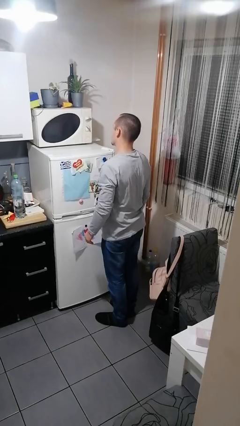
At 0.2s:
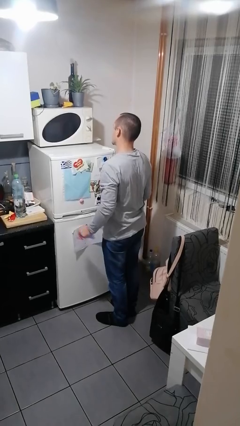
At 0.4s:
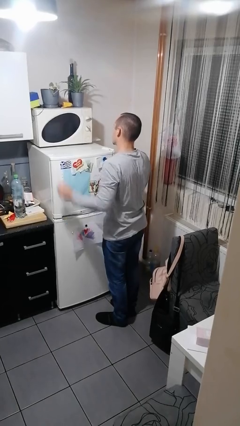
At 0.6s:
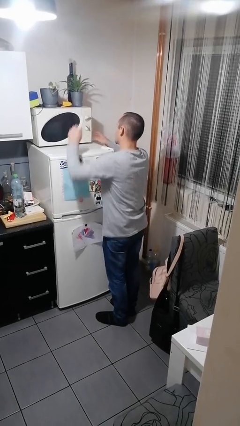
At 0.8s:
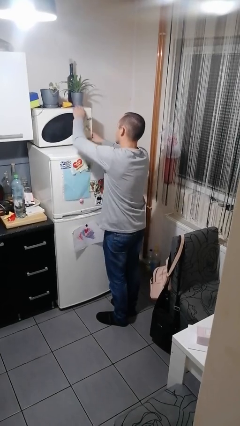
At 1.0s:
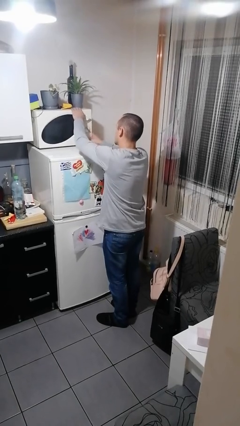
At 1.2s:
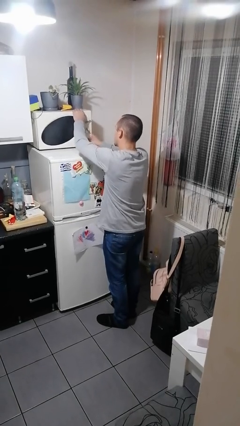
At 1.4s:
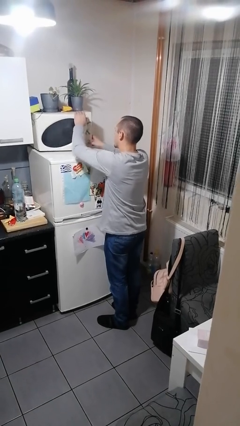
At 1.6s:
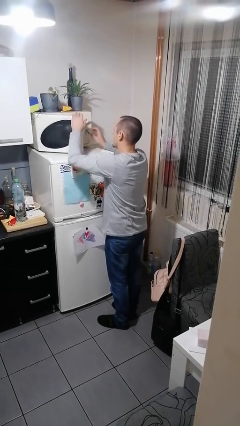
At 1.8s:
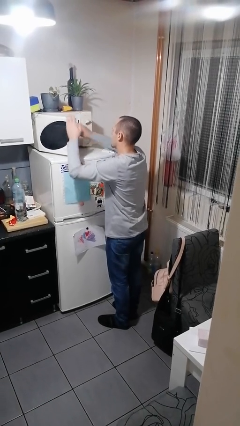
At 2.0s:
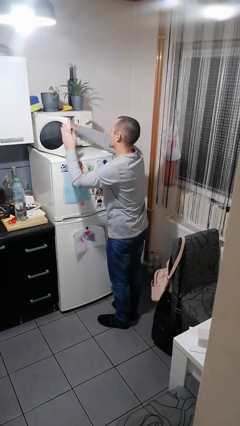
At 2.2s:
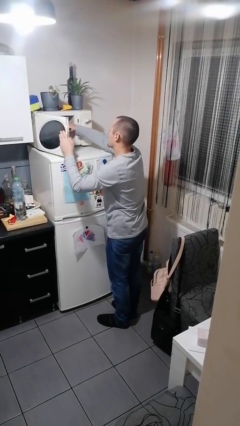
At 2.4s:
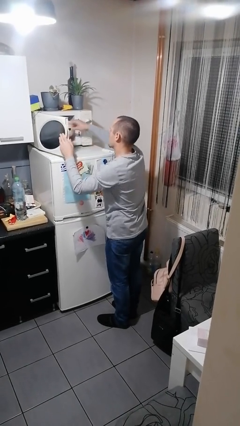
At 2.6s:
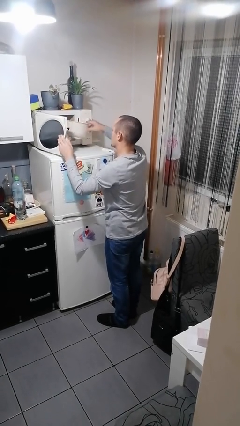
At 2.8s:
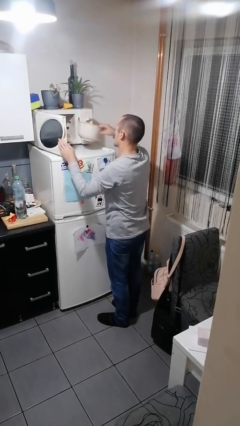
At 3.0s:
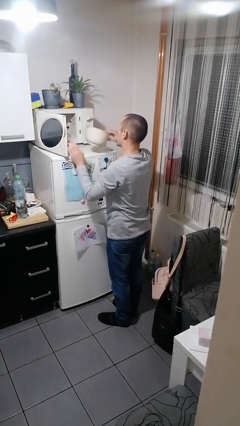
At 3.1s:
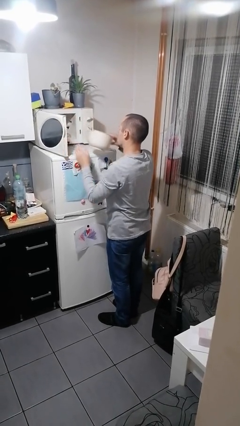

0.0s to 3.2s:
person takes object from microwave

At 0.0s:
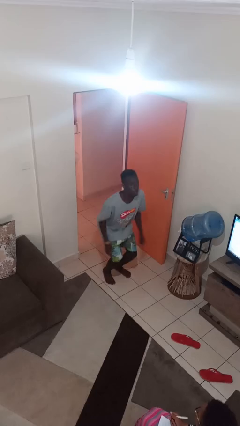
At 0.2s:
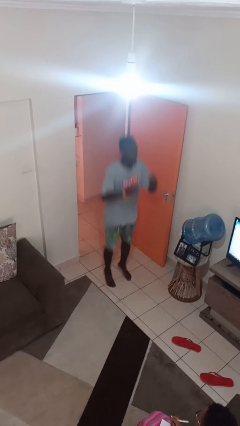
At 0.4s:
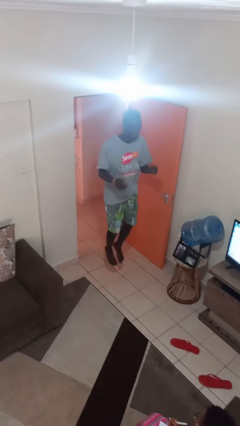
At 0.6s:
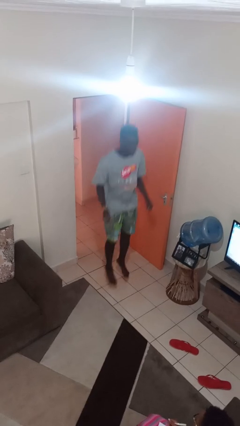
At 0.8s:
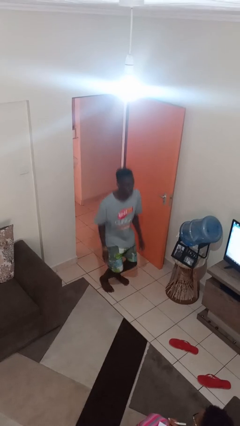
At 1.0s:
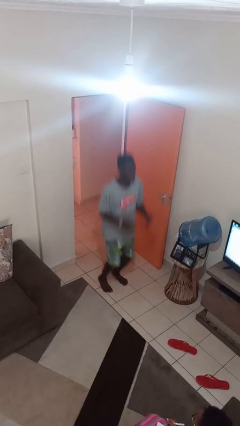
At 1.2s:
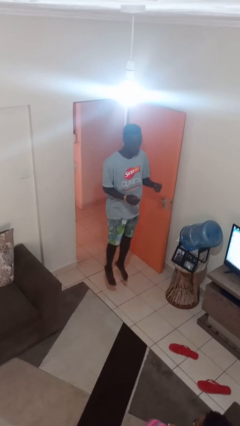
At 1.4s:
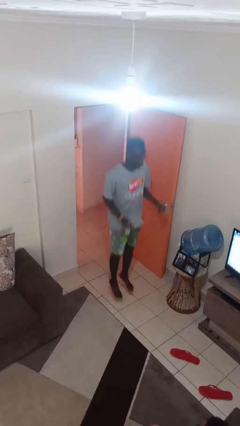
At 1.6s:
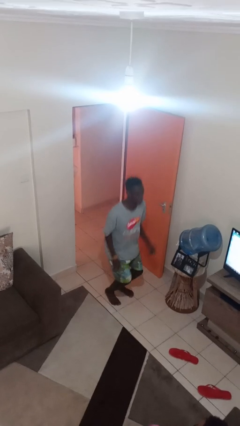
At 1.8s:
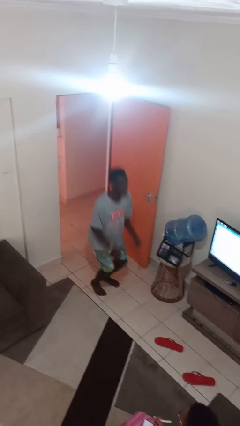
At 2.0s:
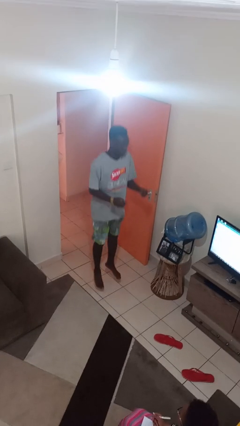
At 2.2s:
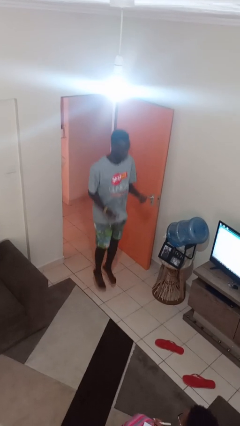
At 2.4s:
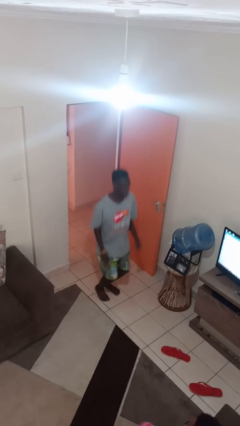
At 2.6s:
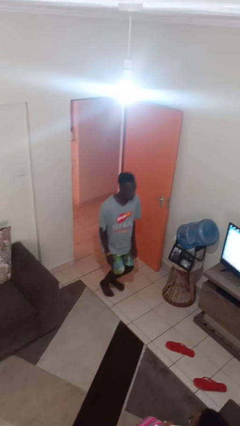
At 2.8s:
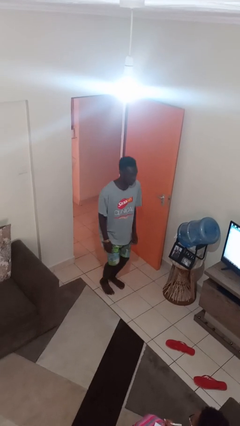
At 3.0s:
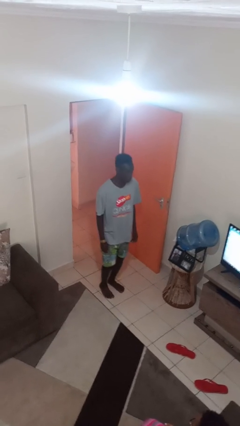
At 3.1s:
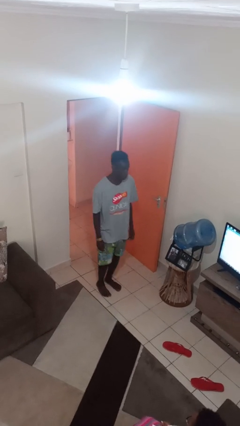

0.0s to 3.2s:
person jumps

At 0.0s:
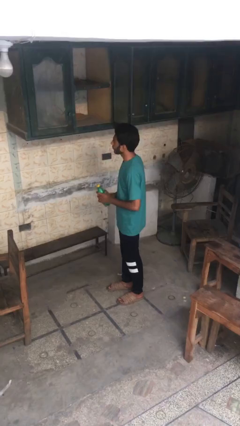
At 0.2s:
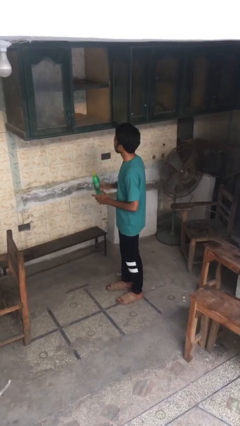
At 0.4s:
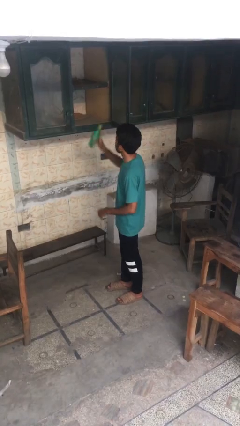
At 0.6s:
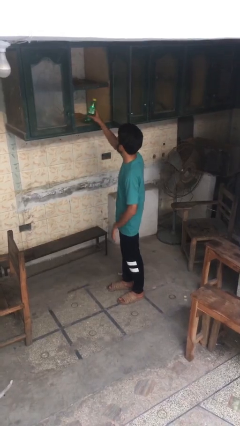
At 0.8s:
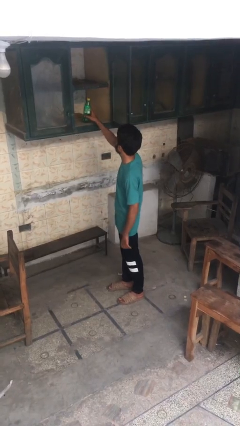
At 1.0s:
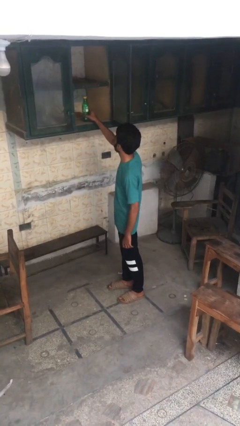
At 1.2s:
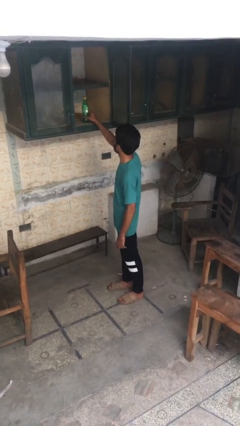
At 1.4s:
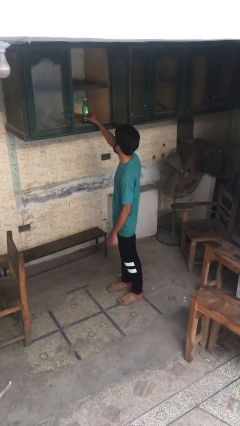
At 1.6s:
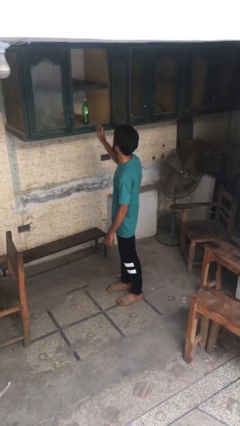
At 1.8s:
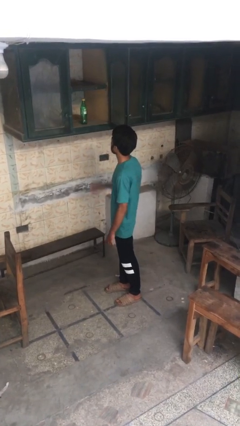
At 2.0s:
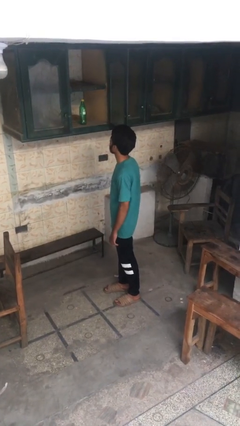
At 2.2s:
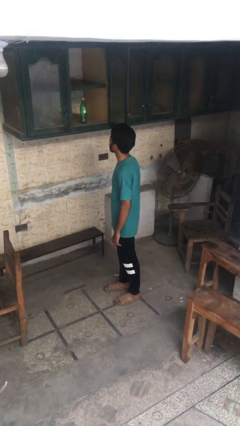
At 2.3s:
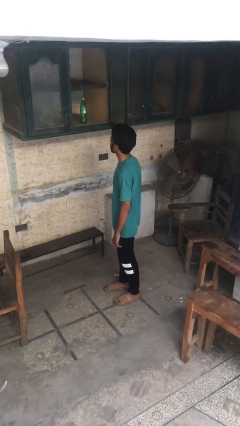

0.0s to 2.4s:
person puts object in cabinet

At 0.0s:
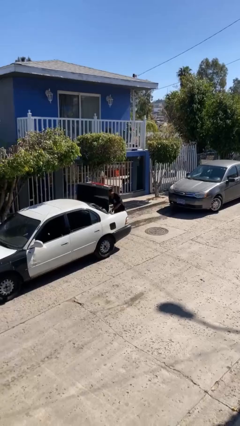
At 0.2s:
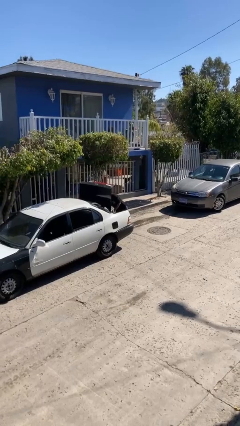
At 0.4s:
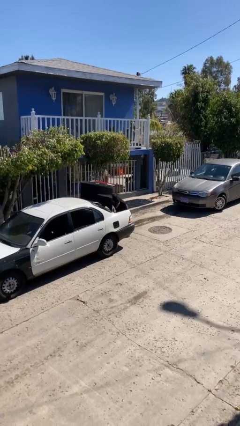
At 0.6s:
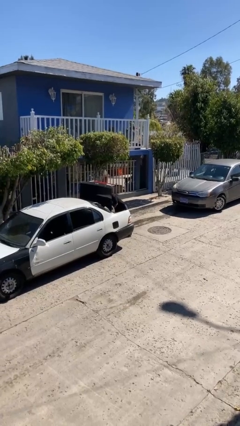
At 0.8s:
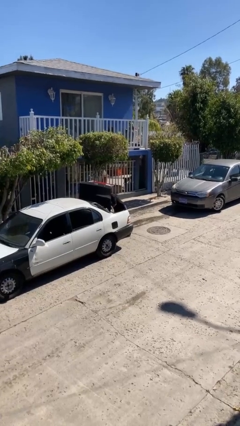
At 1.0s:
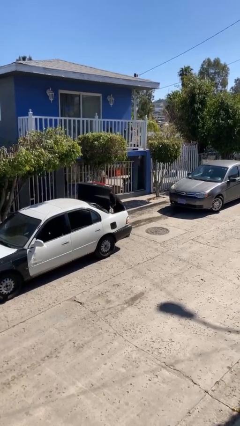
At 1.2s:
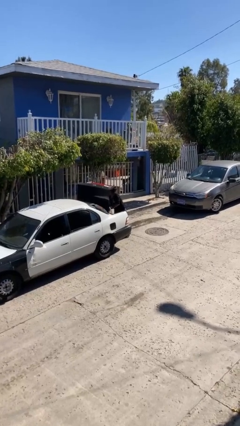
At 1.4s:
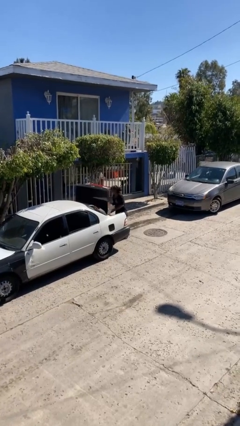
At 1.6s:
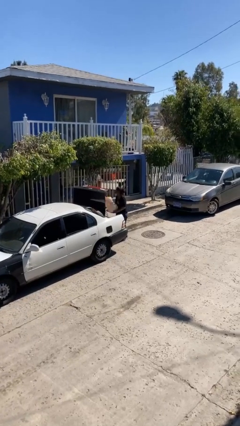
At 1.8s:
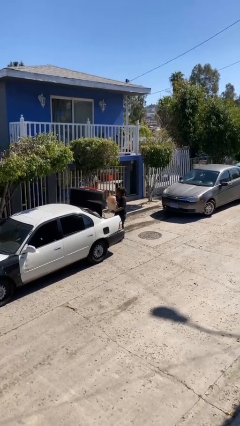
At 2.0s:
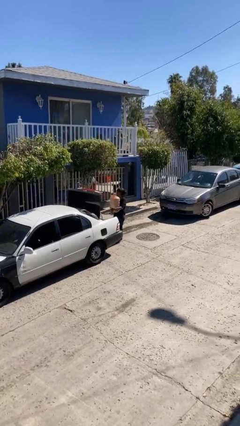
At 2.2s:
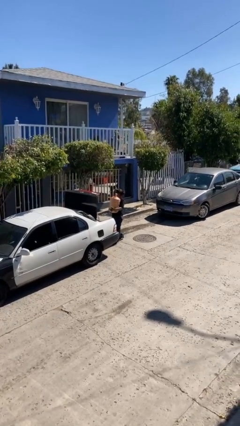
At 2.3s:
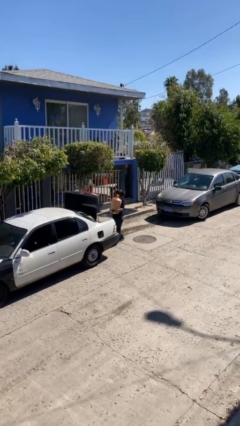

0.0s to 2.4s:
person unloads car

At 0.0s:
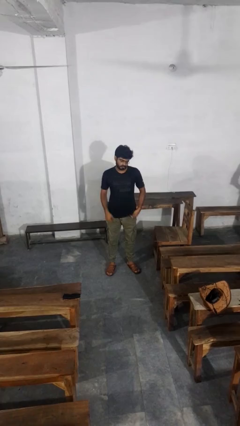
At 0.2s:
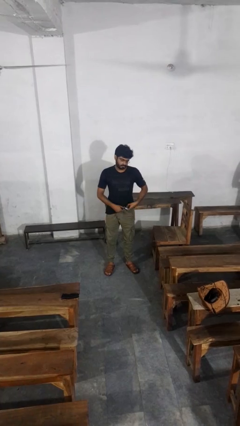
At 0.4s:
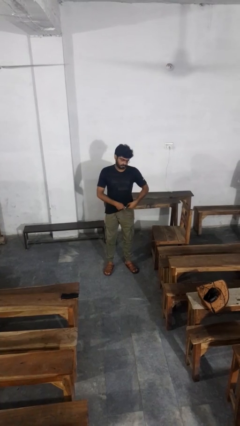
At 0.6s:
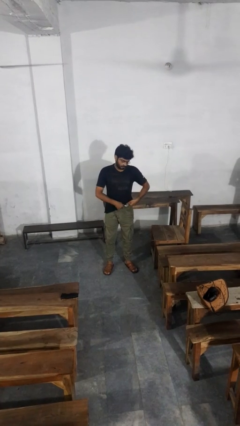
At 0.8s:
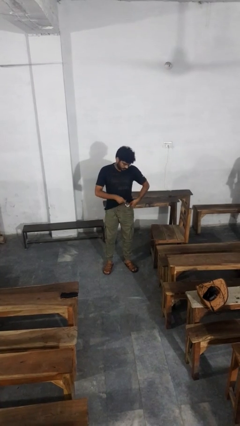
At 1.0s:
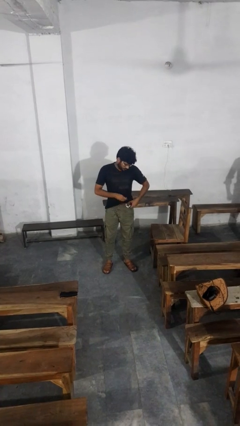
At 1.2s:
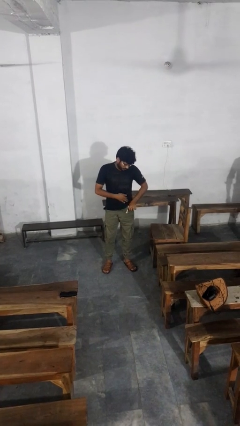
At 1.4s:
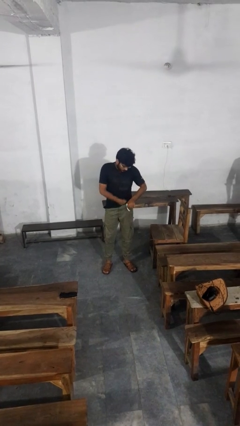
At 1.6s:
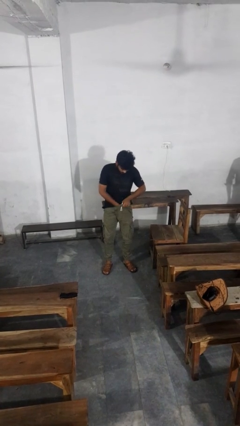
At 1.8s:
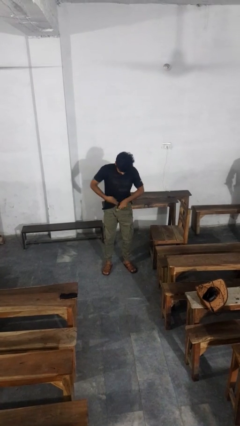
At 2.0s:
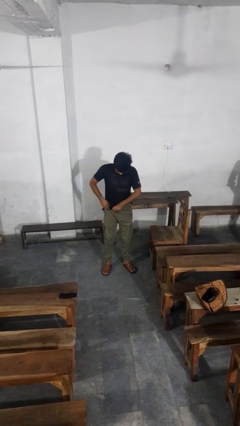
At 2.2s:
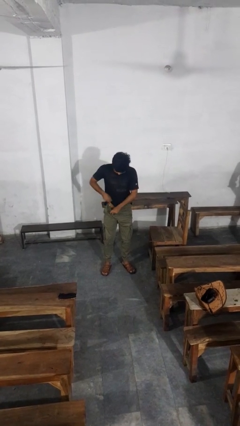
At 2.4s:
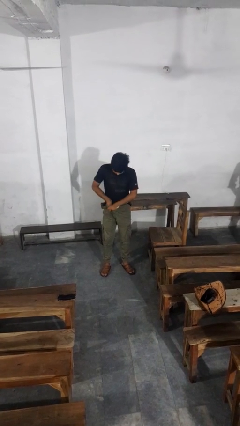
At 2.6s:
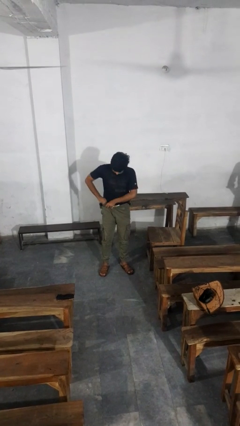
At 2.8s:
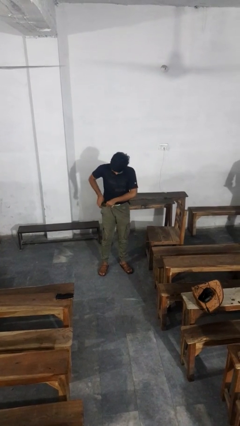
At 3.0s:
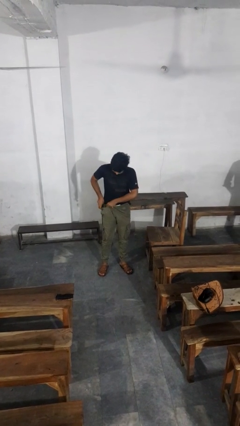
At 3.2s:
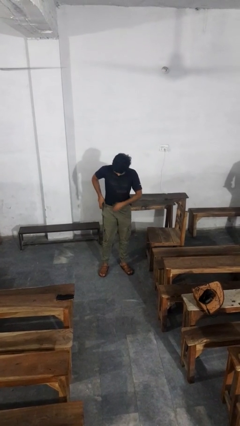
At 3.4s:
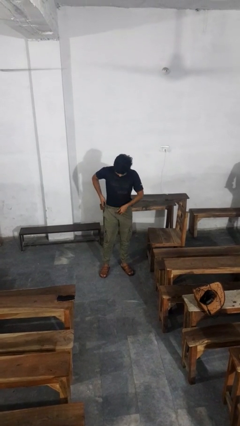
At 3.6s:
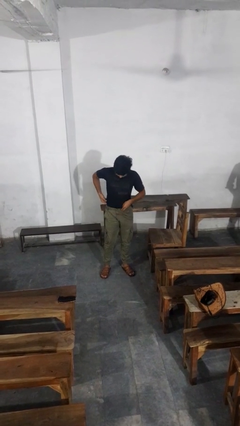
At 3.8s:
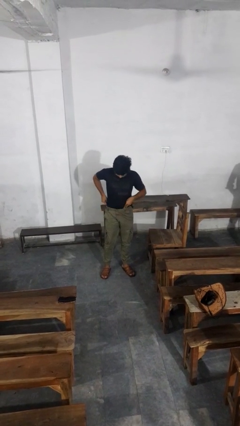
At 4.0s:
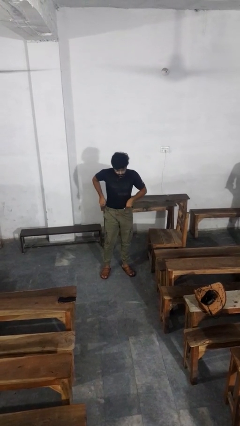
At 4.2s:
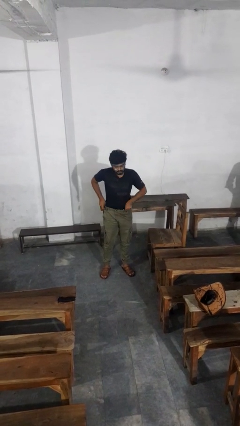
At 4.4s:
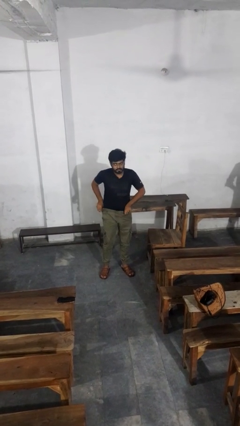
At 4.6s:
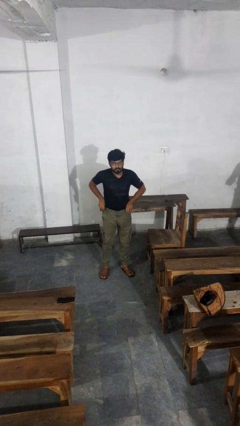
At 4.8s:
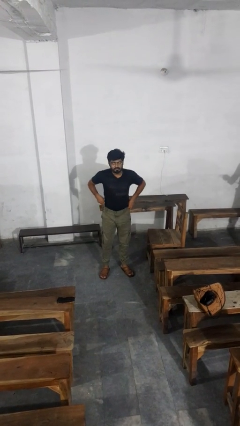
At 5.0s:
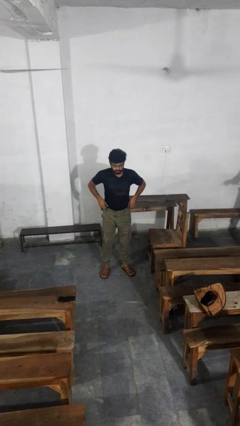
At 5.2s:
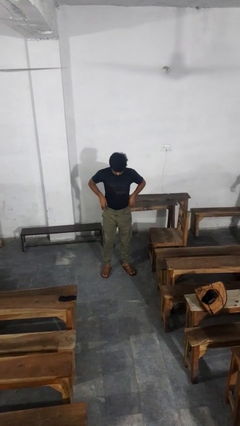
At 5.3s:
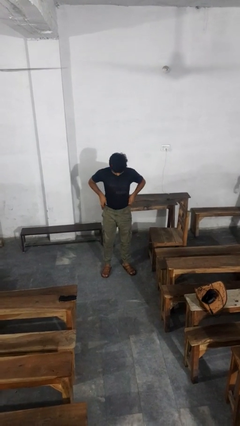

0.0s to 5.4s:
person tucks in shirt

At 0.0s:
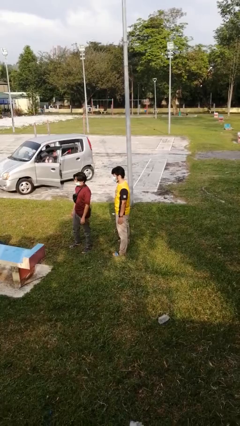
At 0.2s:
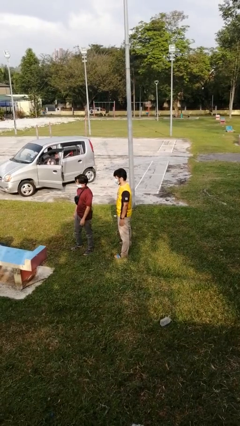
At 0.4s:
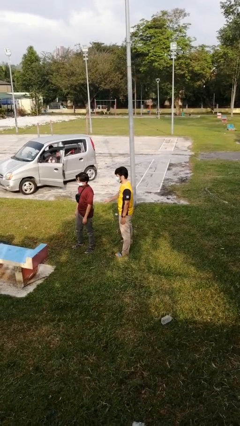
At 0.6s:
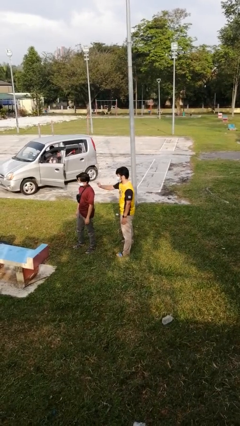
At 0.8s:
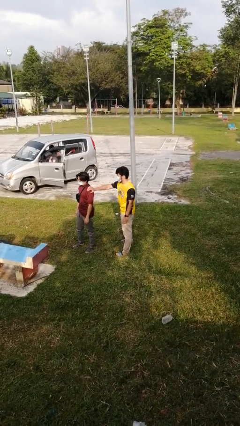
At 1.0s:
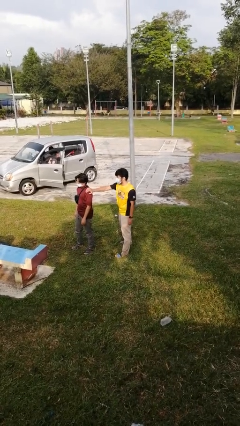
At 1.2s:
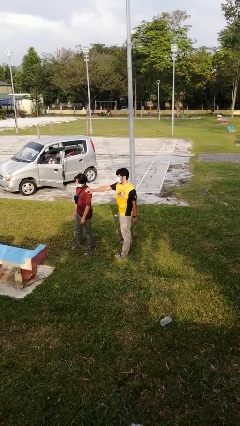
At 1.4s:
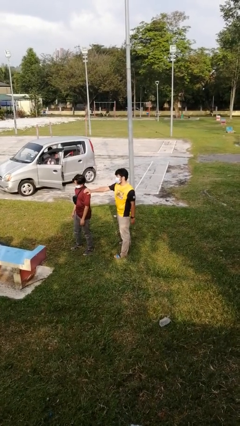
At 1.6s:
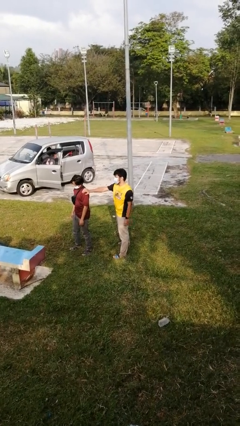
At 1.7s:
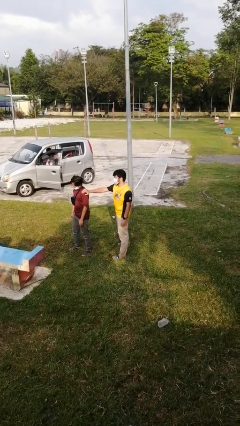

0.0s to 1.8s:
person grabs person by shoulder
